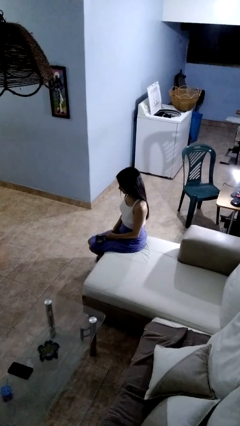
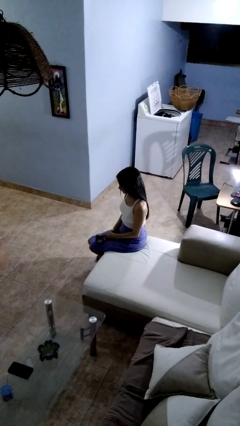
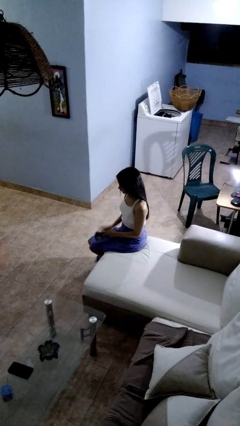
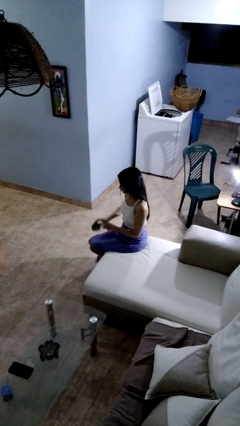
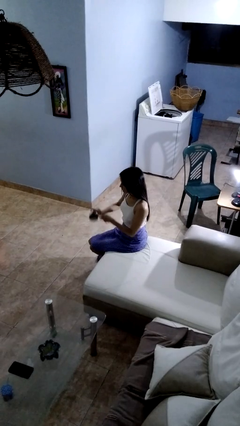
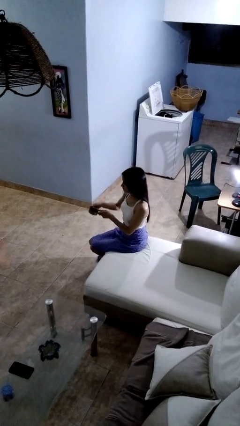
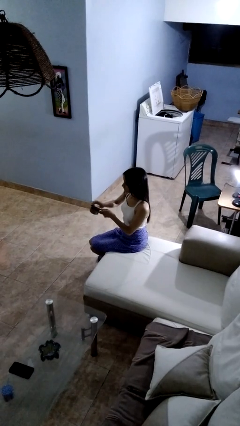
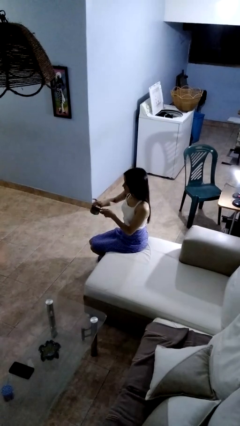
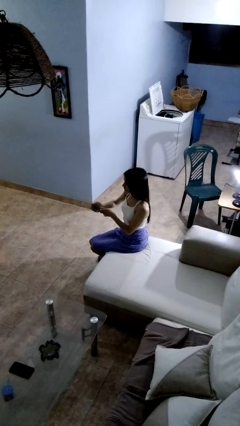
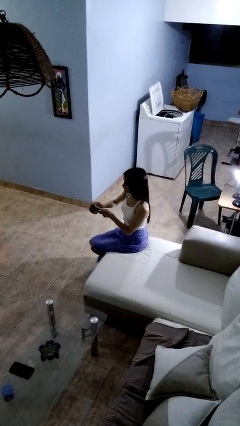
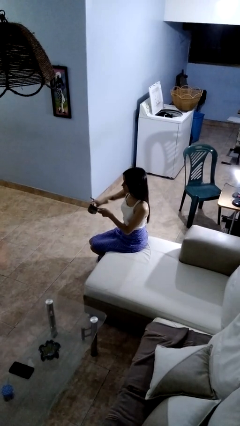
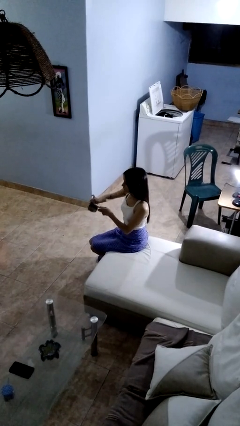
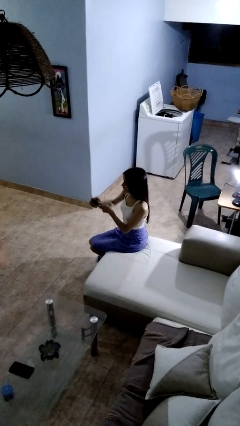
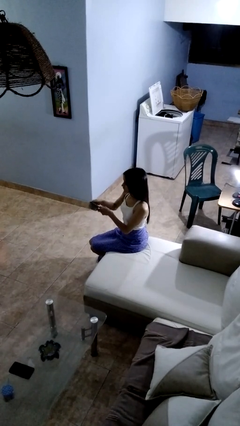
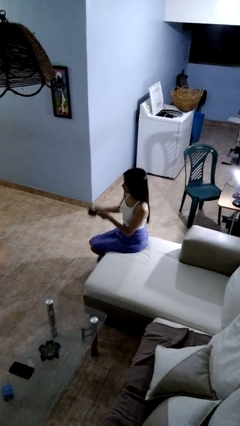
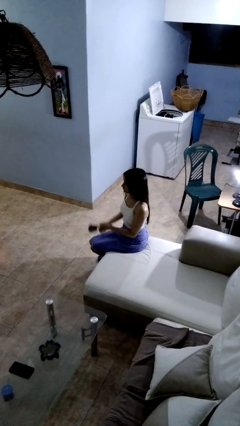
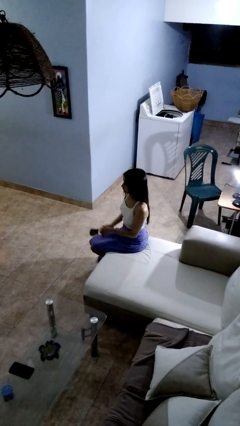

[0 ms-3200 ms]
person opens can with can opener

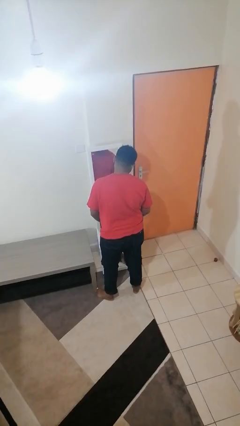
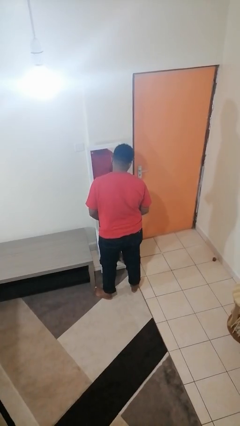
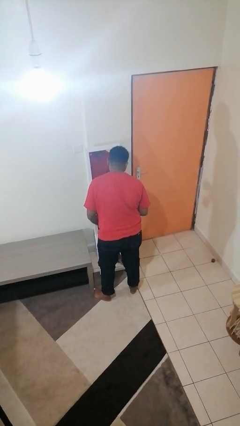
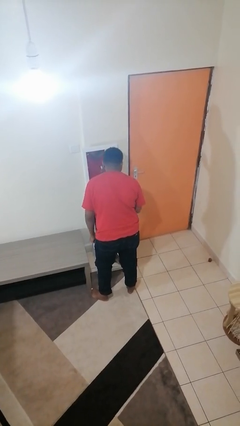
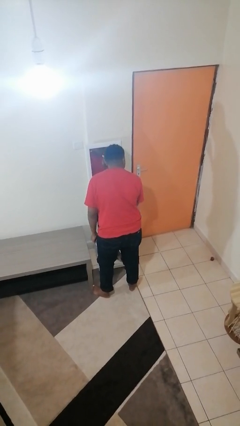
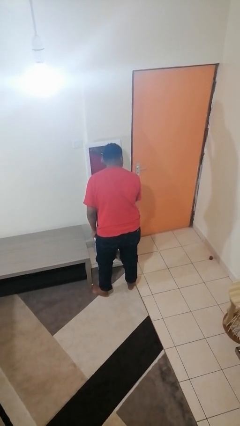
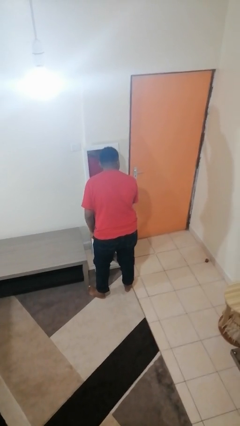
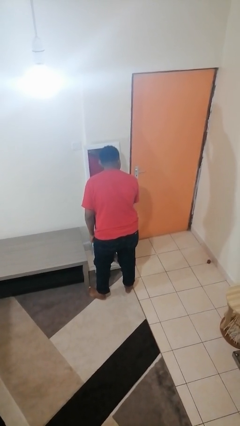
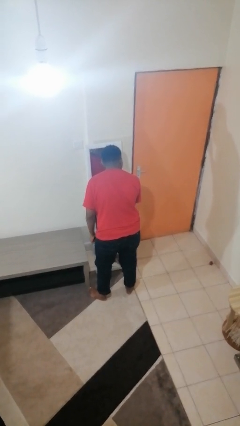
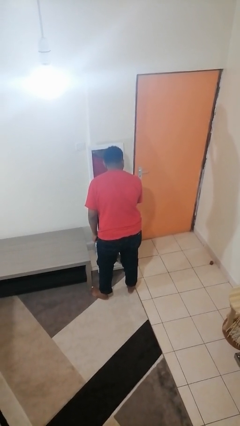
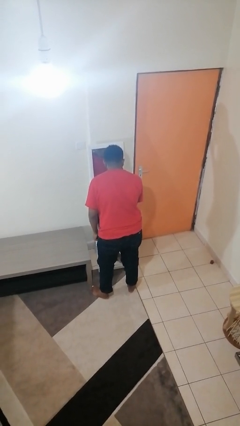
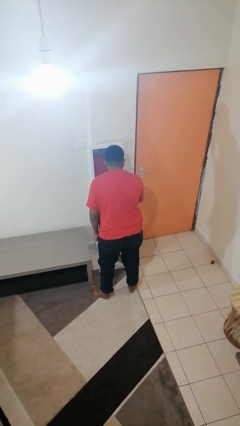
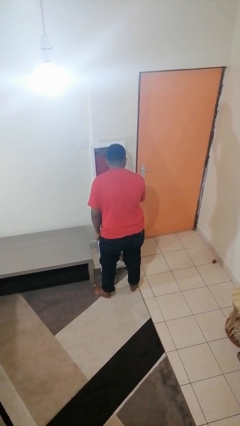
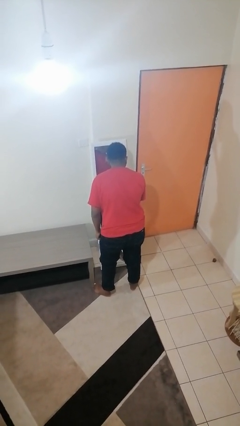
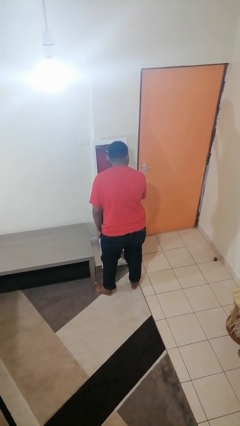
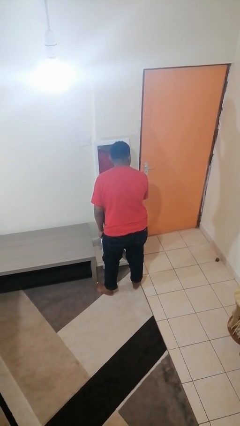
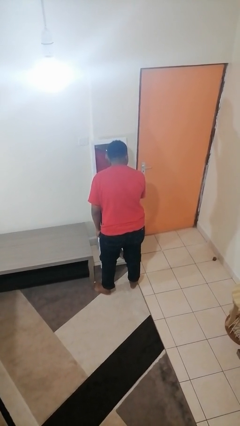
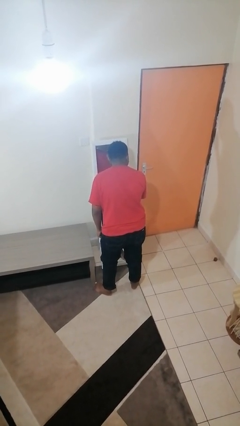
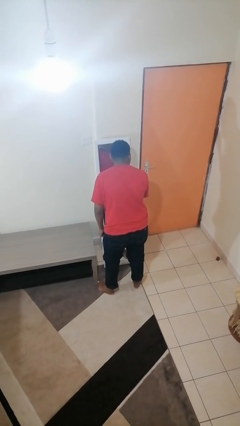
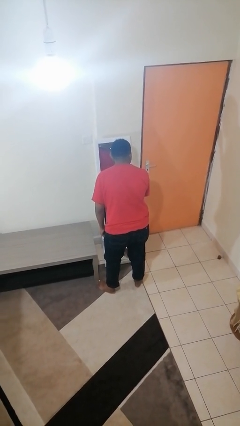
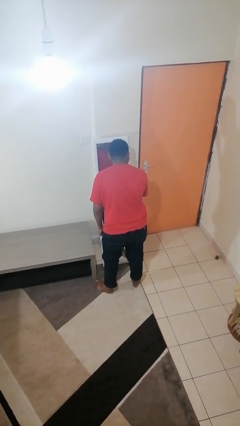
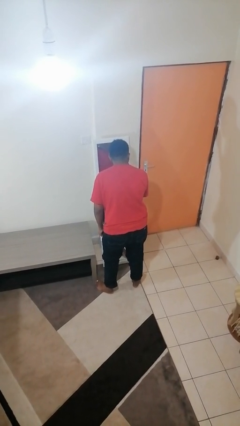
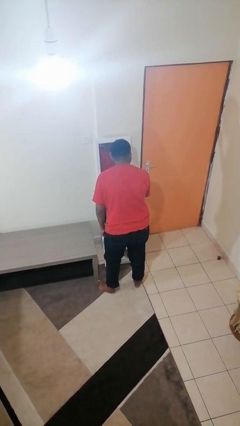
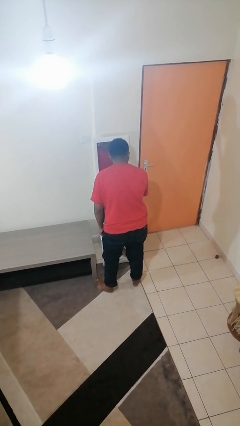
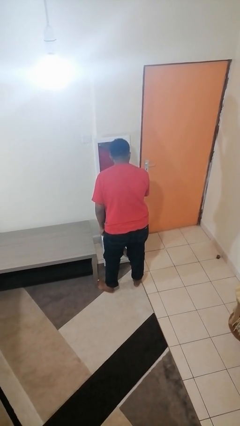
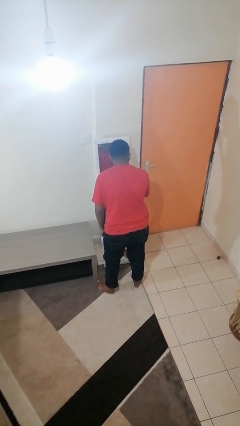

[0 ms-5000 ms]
person applies lip makeup

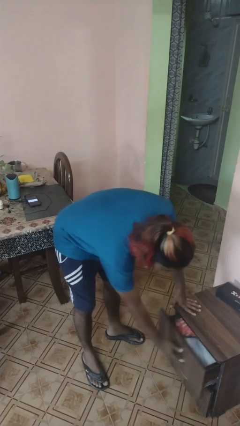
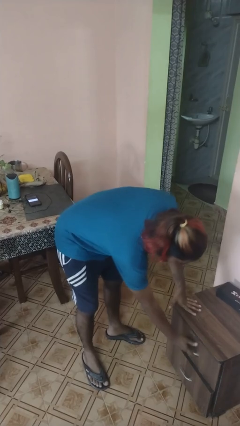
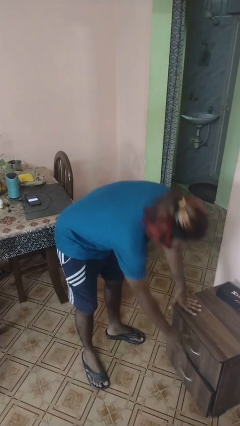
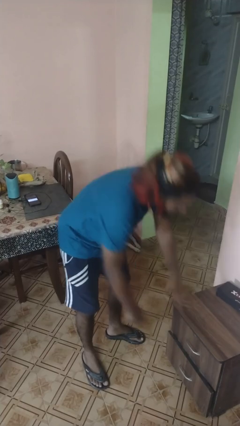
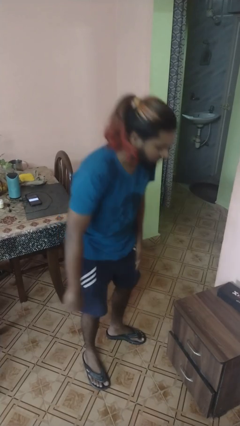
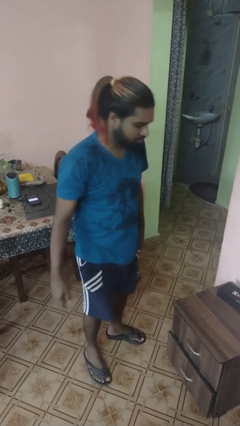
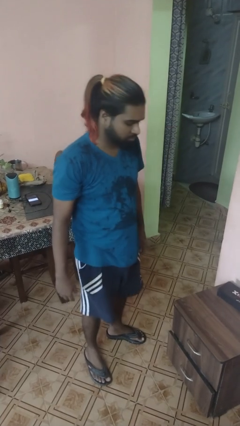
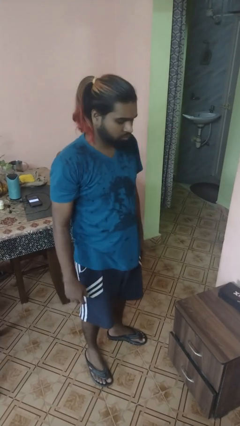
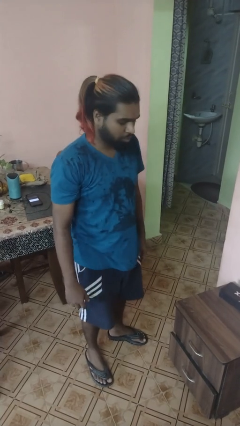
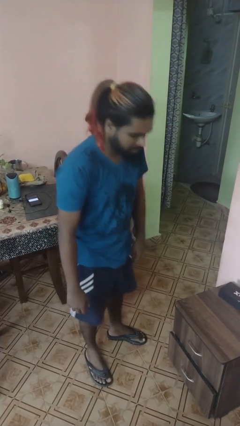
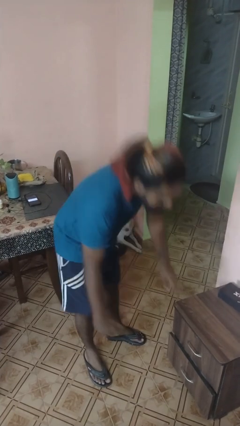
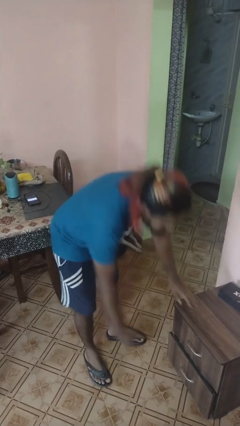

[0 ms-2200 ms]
person closes dresser drawer

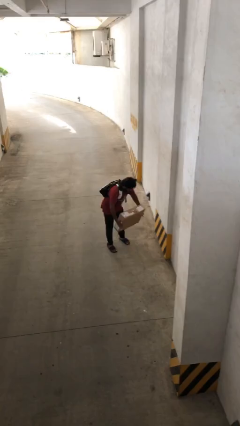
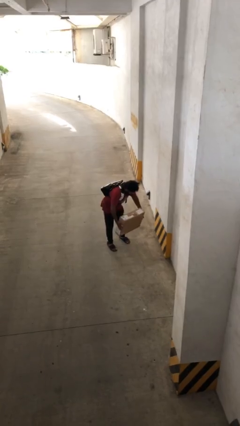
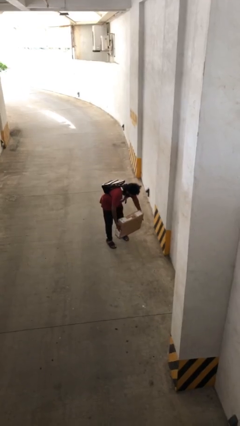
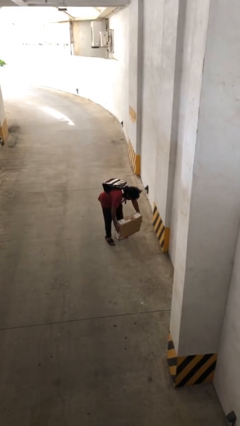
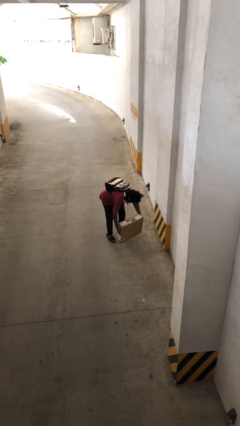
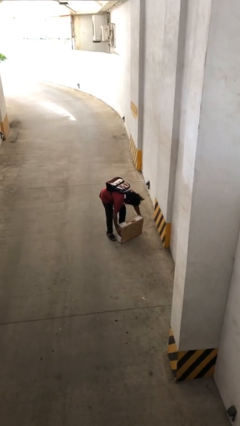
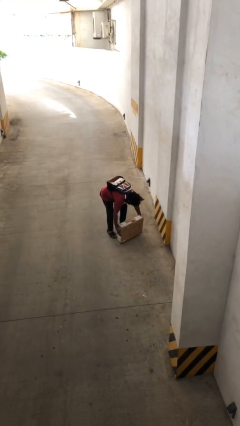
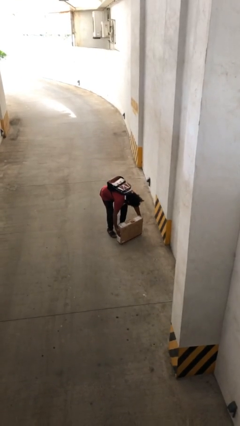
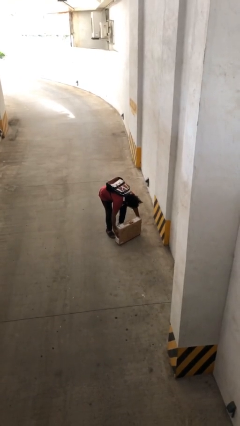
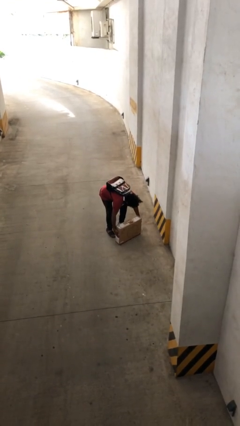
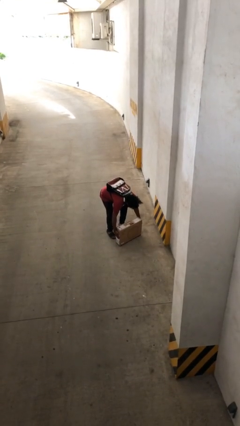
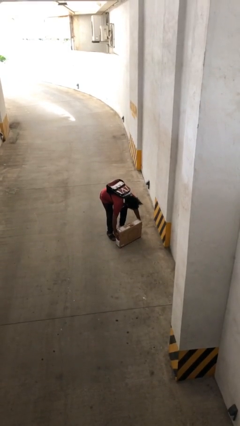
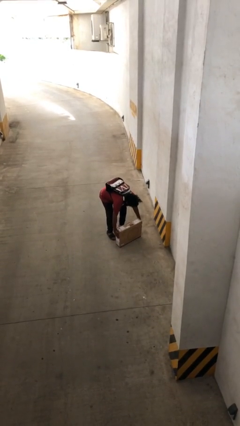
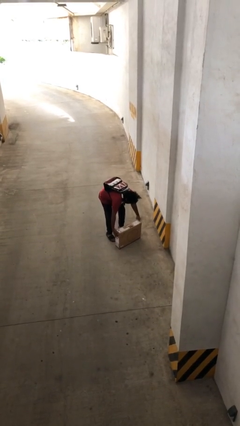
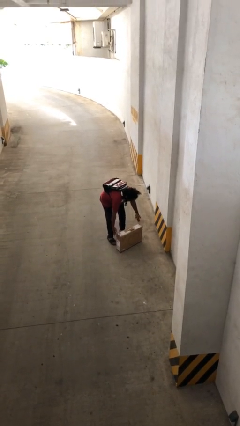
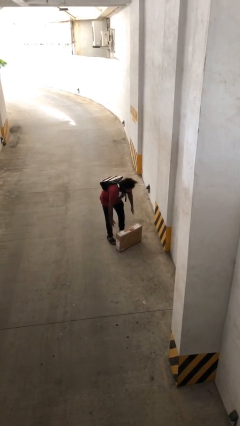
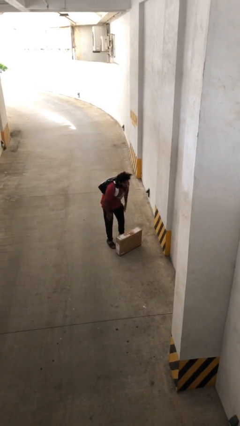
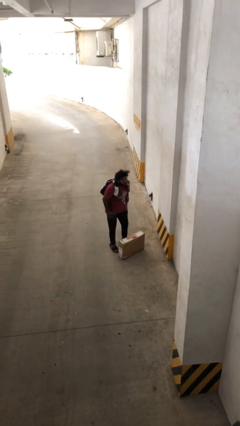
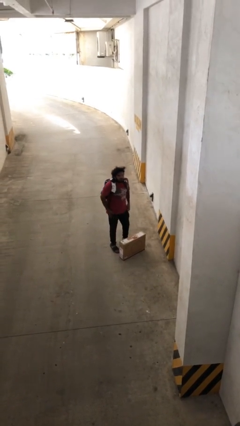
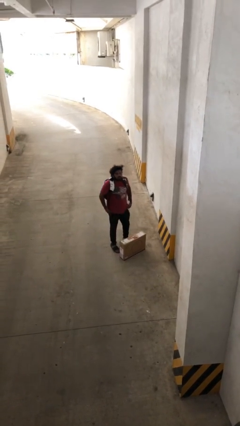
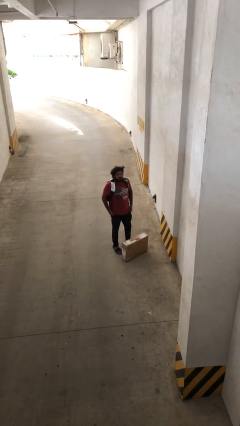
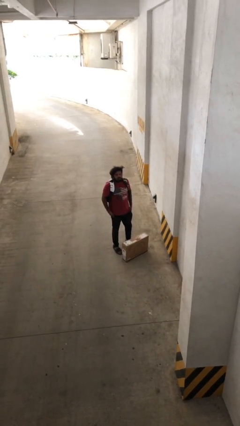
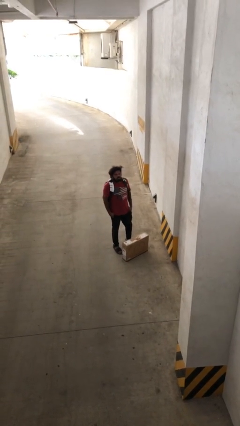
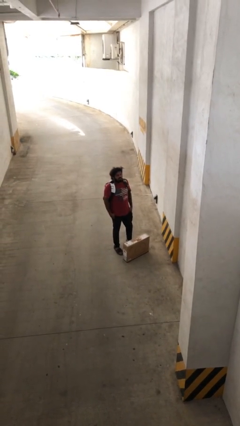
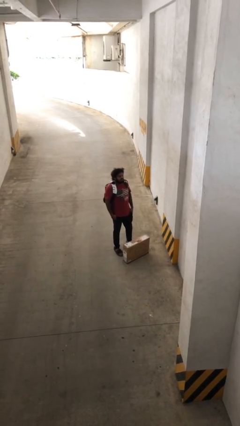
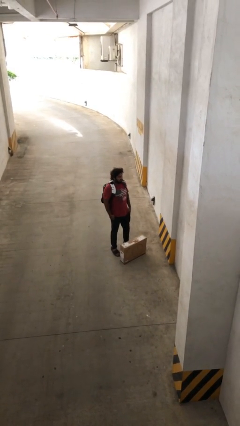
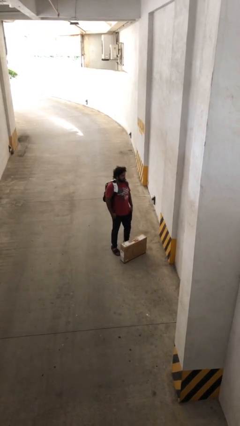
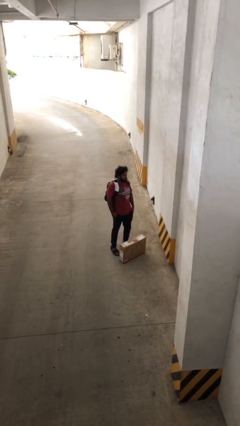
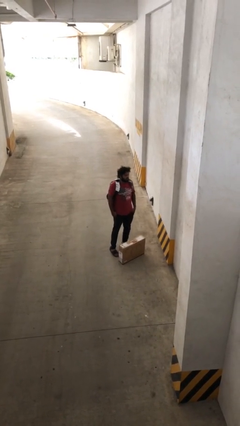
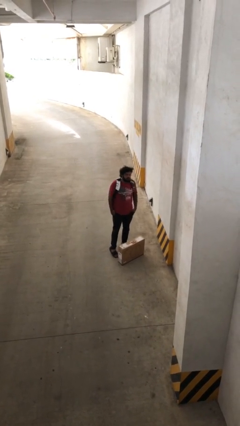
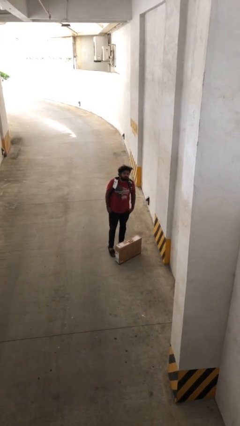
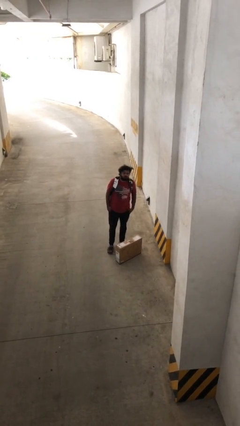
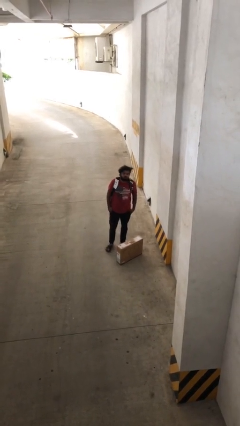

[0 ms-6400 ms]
person puts down object on floor

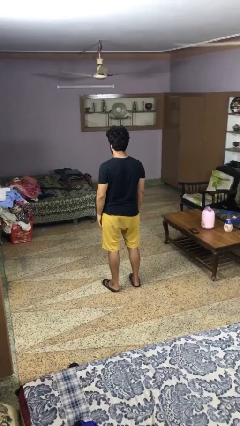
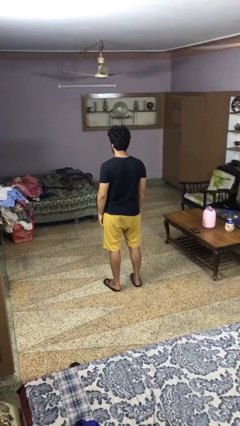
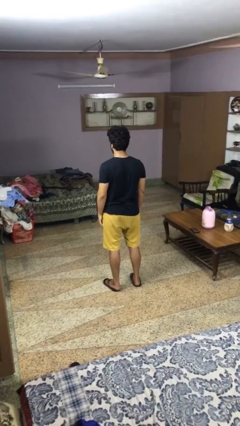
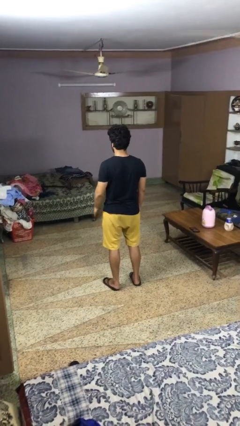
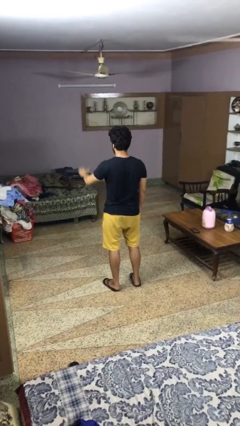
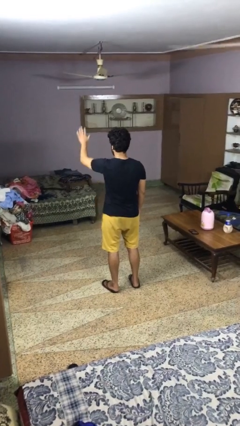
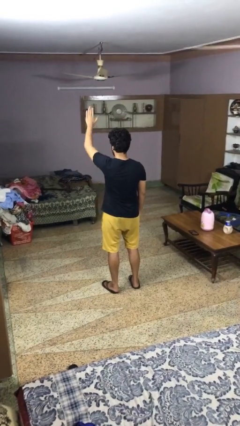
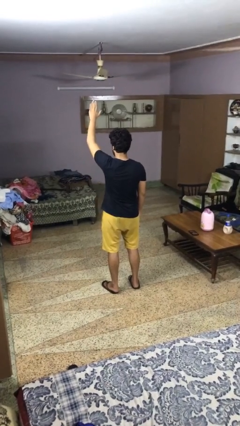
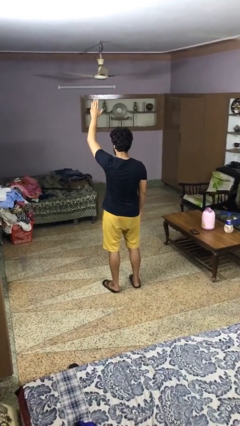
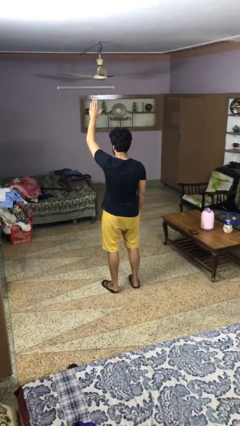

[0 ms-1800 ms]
person gestures raise hand
